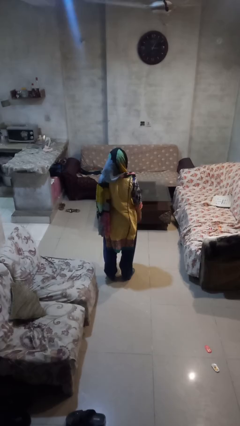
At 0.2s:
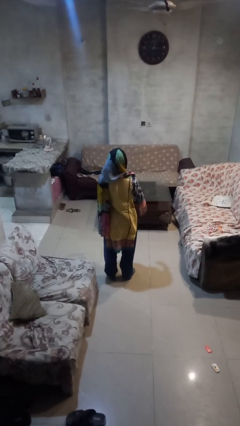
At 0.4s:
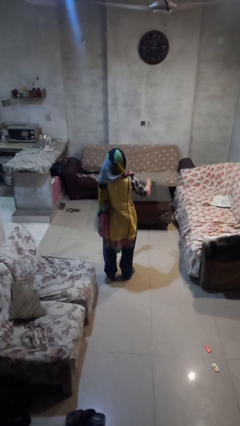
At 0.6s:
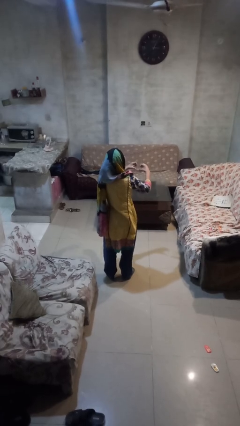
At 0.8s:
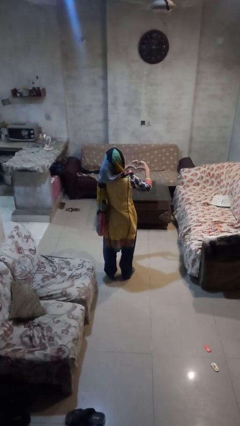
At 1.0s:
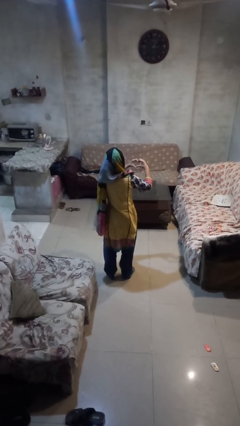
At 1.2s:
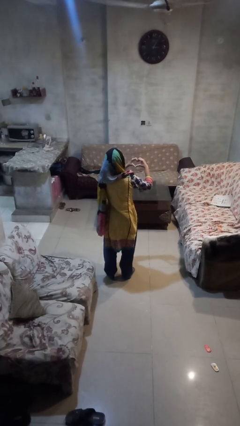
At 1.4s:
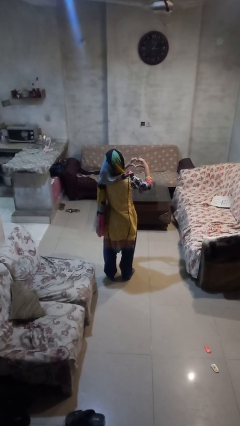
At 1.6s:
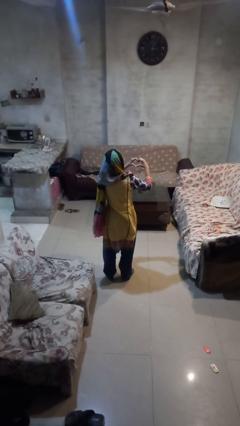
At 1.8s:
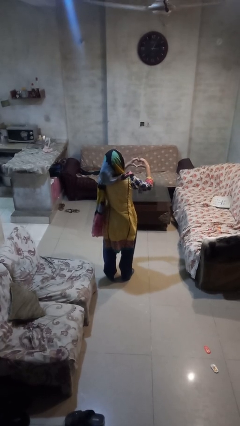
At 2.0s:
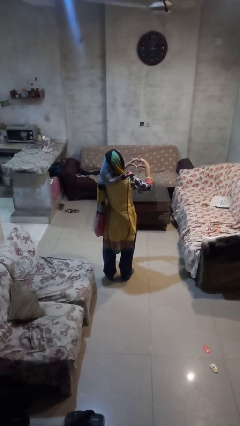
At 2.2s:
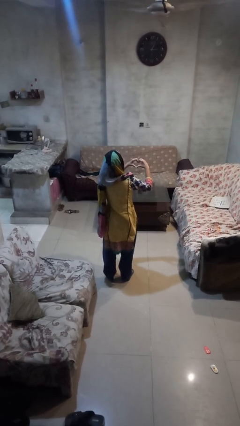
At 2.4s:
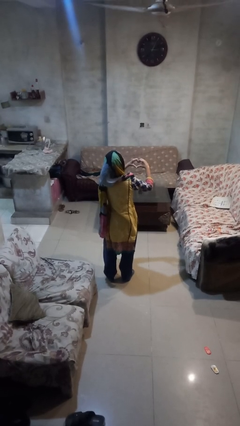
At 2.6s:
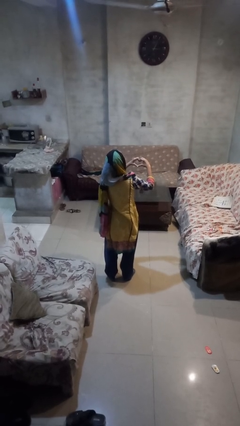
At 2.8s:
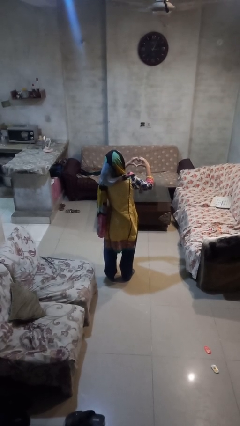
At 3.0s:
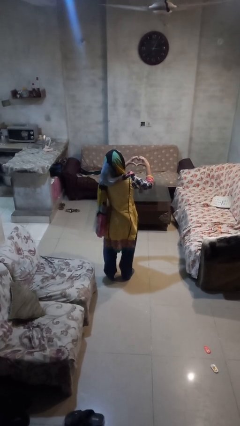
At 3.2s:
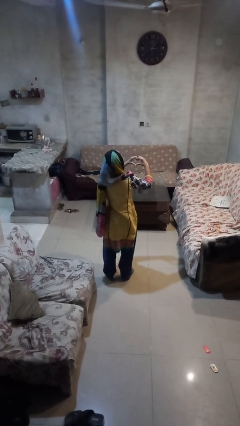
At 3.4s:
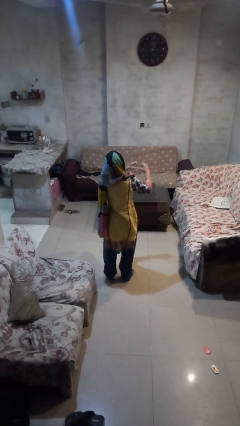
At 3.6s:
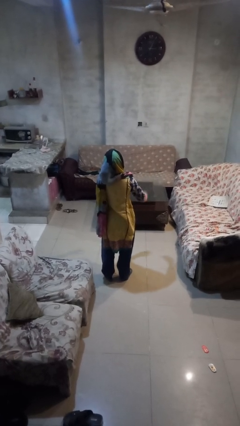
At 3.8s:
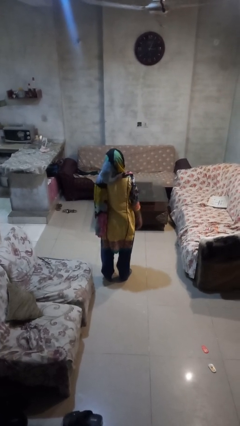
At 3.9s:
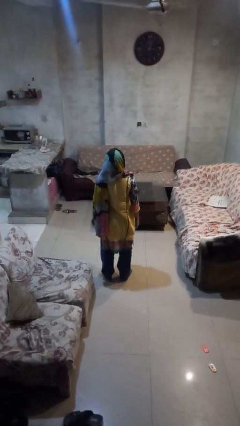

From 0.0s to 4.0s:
person gestures heart

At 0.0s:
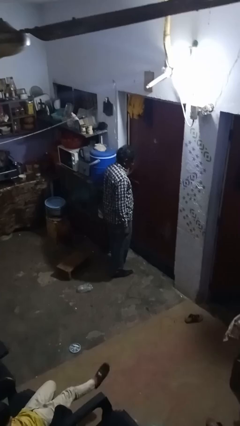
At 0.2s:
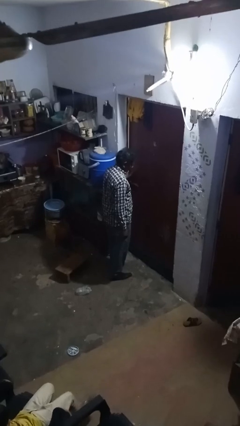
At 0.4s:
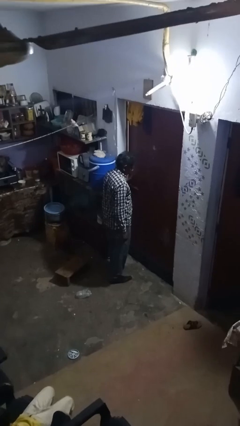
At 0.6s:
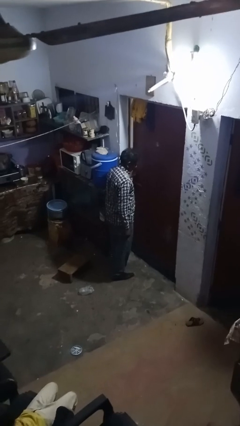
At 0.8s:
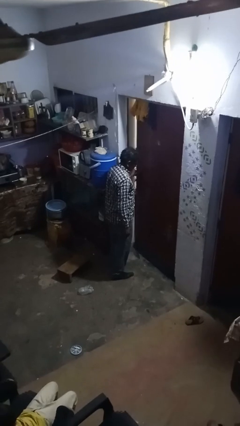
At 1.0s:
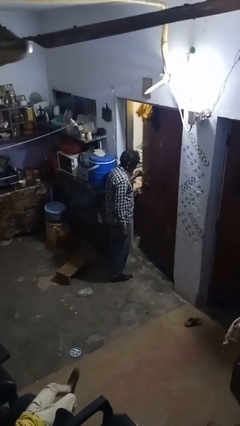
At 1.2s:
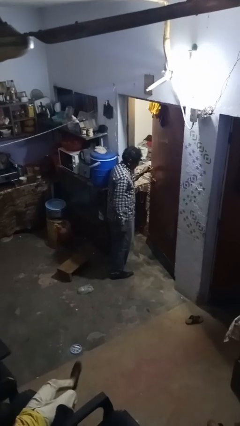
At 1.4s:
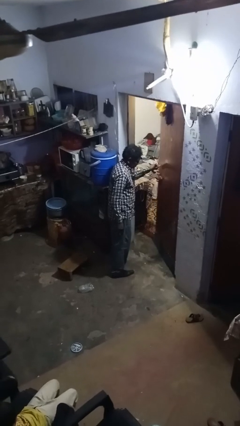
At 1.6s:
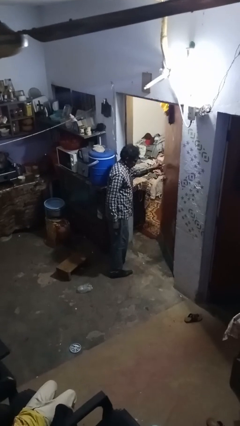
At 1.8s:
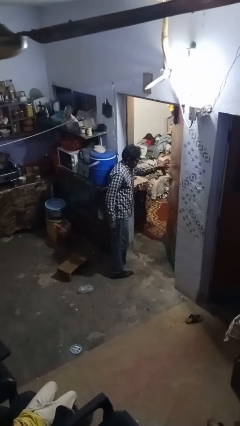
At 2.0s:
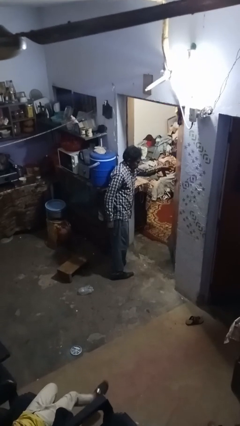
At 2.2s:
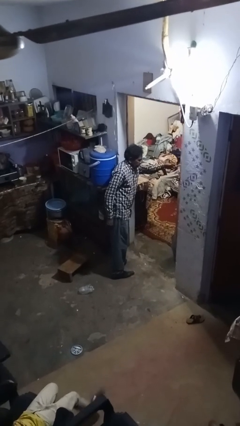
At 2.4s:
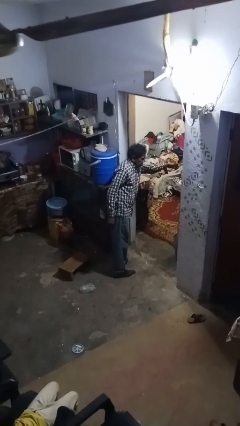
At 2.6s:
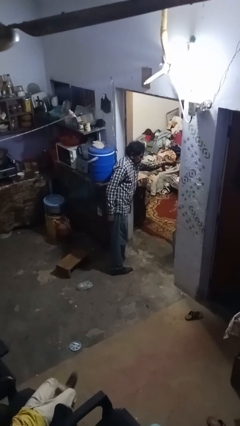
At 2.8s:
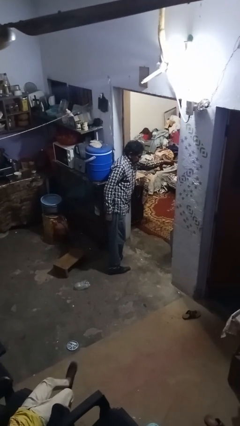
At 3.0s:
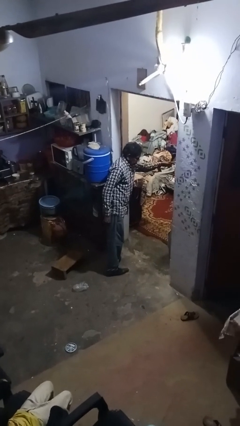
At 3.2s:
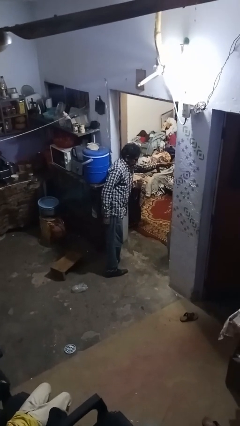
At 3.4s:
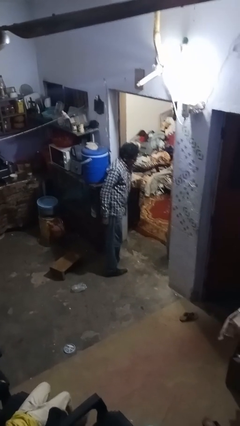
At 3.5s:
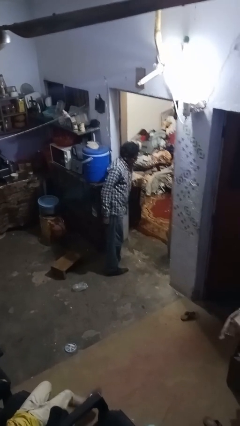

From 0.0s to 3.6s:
person opens facility door

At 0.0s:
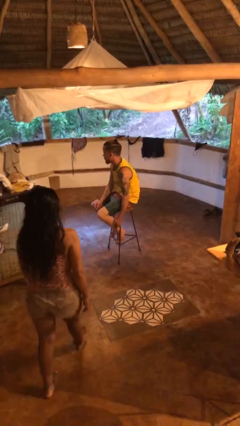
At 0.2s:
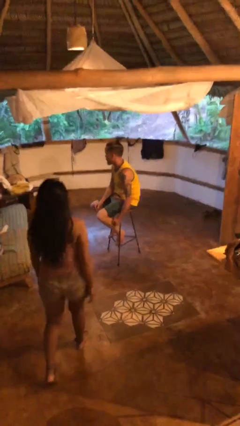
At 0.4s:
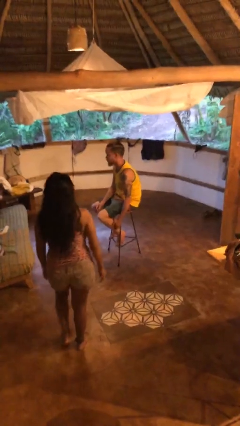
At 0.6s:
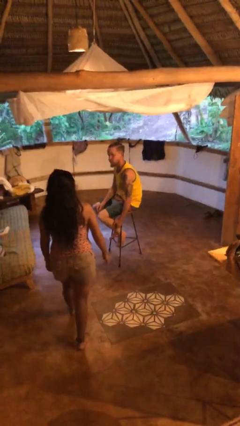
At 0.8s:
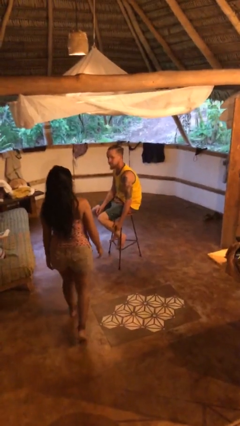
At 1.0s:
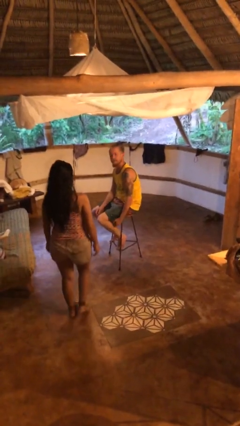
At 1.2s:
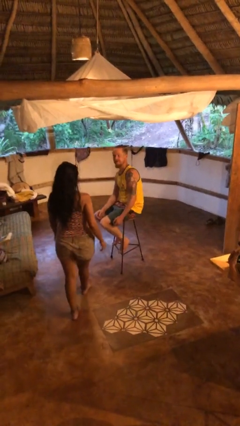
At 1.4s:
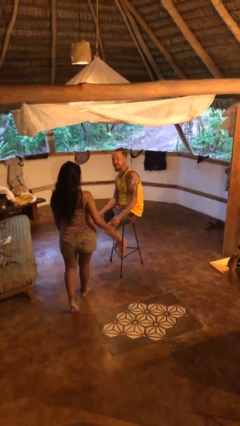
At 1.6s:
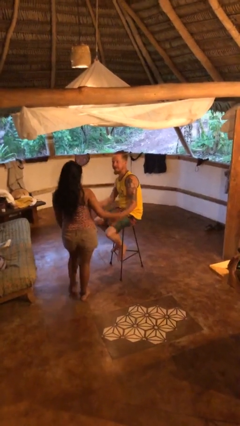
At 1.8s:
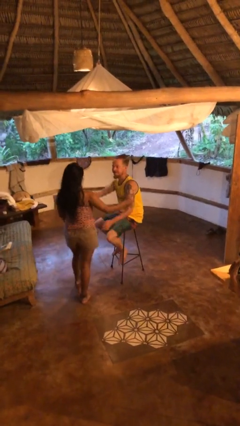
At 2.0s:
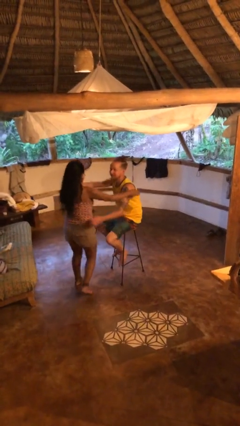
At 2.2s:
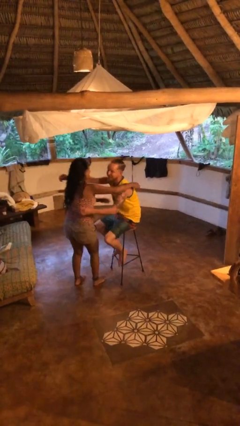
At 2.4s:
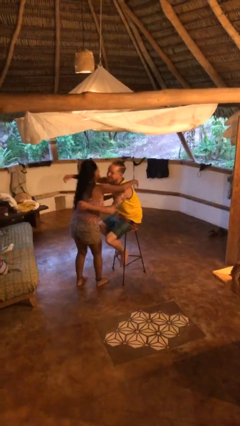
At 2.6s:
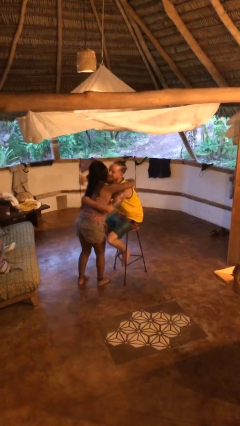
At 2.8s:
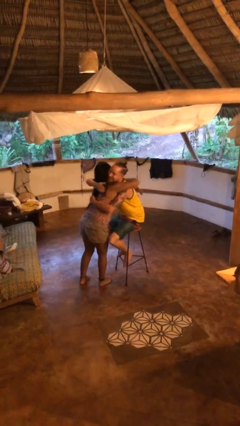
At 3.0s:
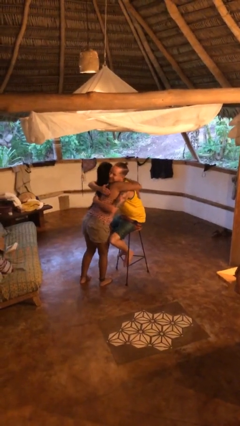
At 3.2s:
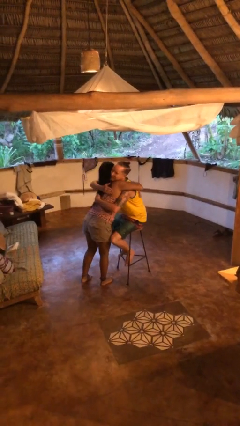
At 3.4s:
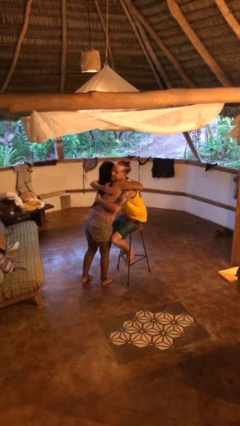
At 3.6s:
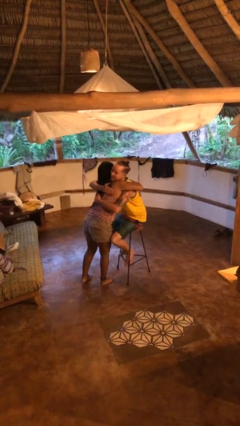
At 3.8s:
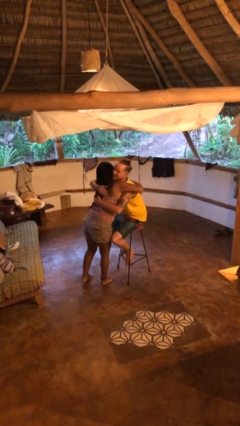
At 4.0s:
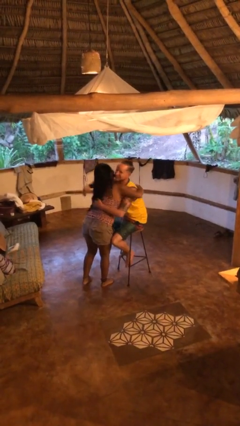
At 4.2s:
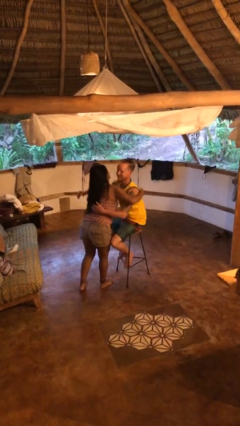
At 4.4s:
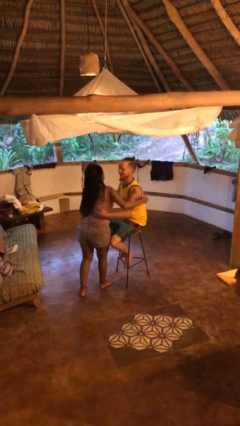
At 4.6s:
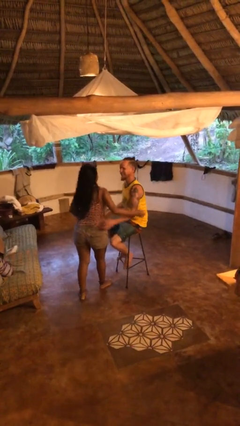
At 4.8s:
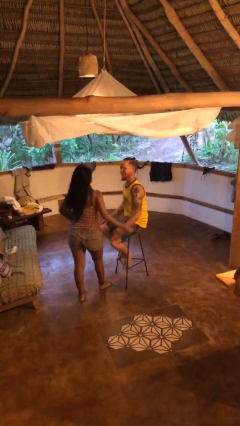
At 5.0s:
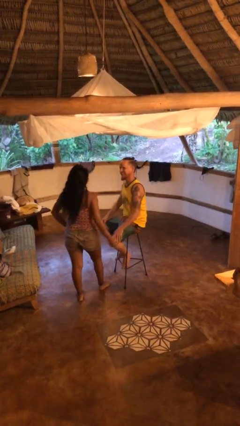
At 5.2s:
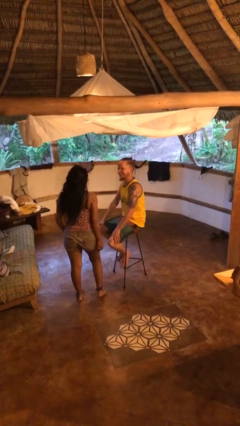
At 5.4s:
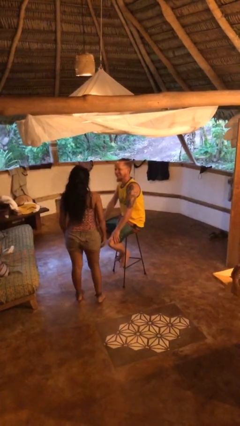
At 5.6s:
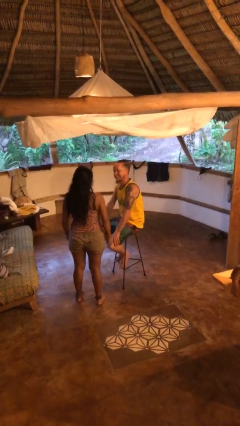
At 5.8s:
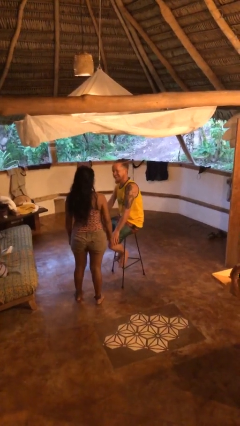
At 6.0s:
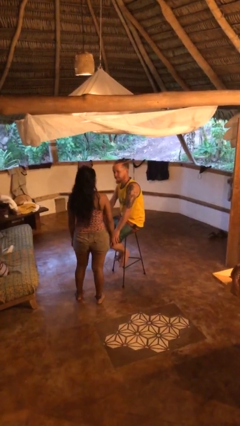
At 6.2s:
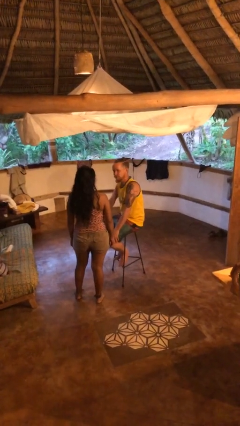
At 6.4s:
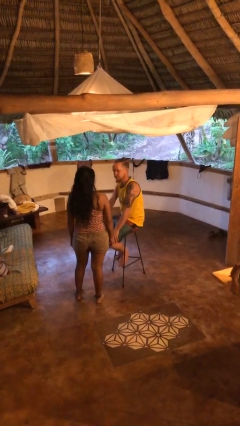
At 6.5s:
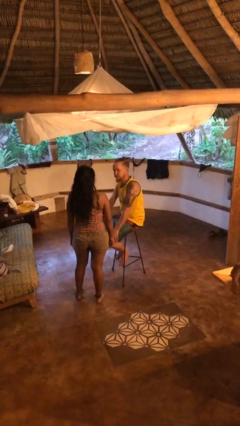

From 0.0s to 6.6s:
person embraces person

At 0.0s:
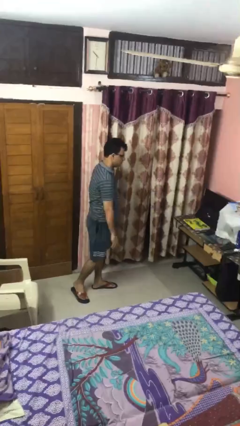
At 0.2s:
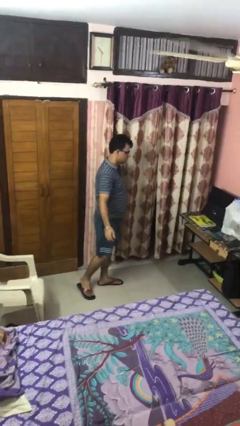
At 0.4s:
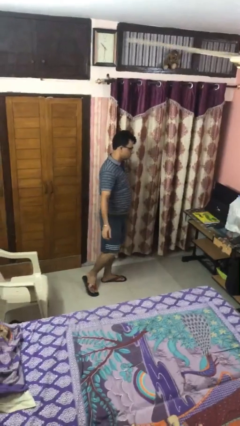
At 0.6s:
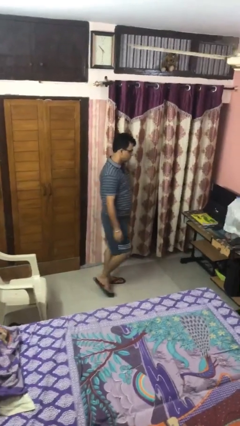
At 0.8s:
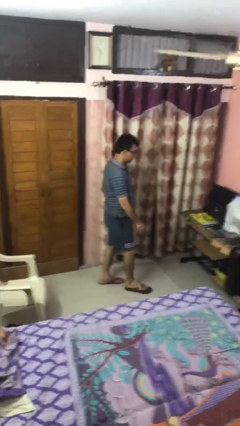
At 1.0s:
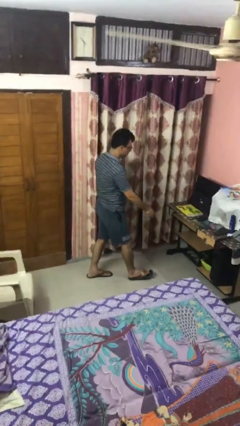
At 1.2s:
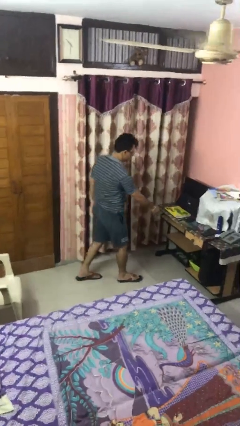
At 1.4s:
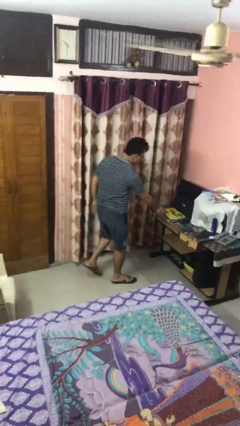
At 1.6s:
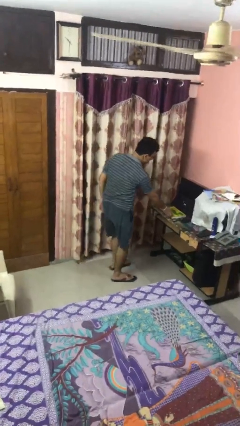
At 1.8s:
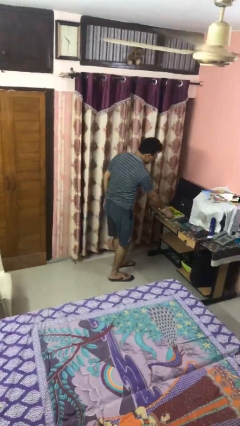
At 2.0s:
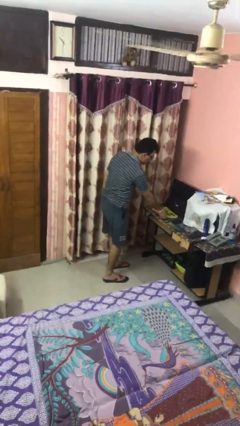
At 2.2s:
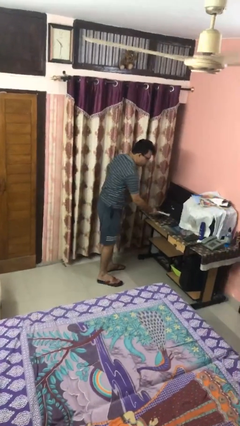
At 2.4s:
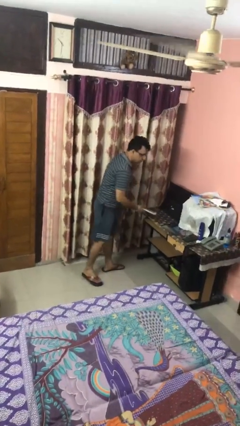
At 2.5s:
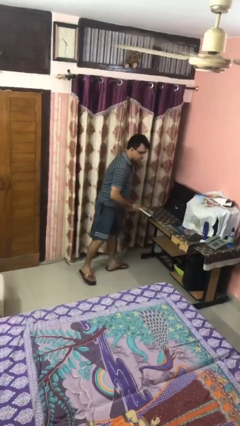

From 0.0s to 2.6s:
person picks up object from table

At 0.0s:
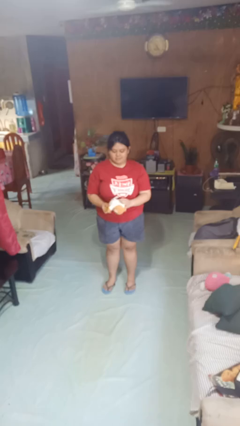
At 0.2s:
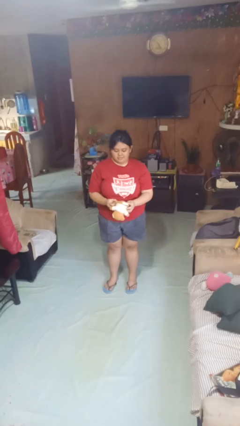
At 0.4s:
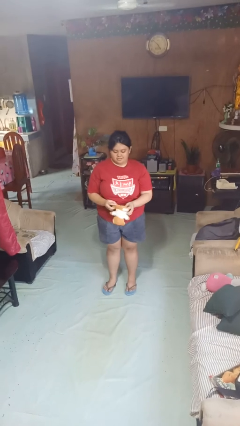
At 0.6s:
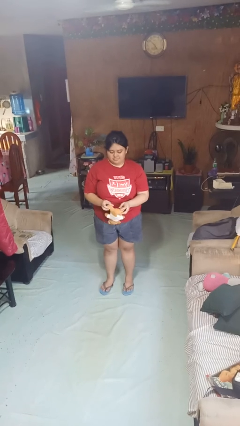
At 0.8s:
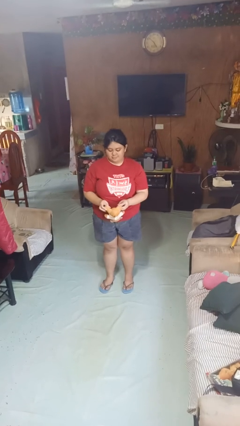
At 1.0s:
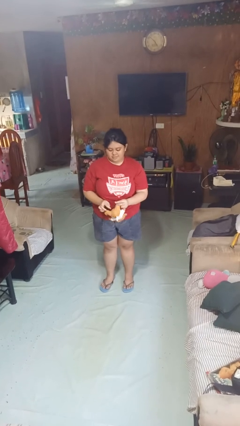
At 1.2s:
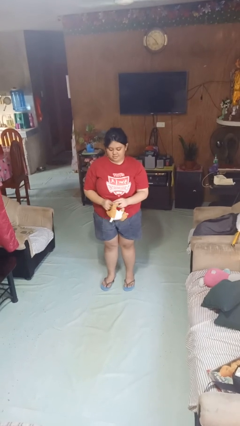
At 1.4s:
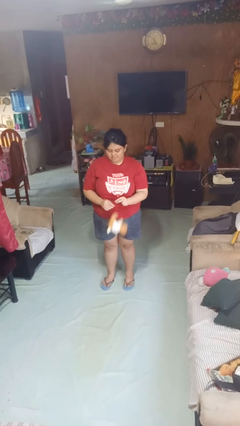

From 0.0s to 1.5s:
person drops object
